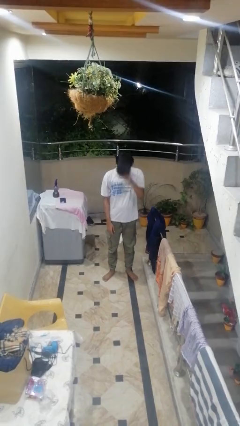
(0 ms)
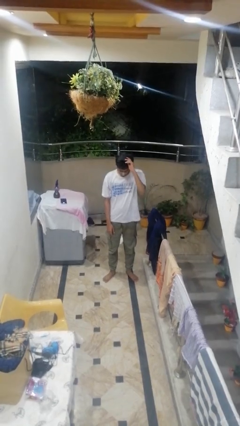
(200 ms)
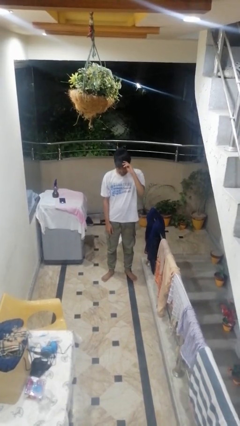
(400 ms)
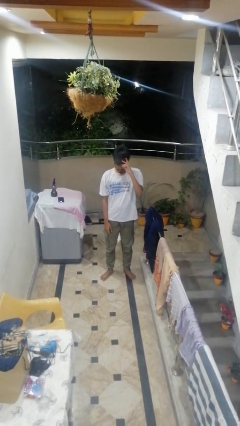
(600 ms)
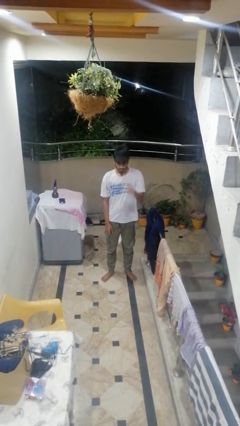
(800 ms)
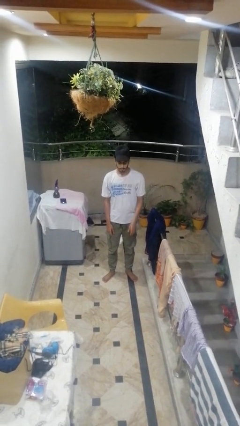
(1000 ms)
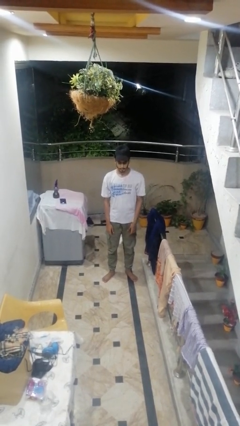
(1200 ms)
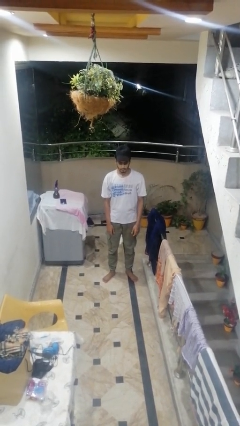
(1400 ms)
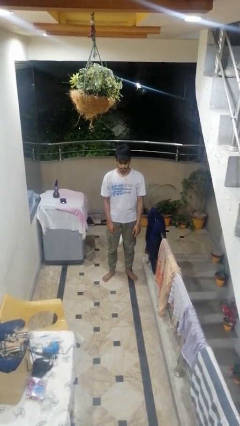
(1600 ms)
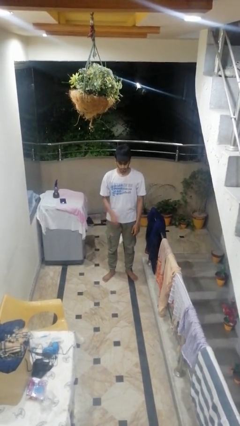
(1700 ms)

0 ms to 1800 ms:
person puts on hat

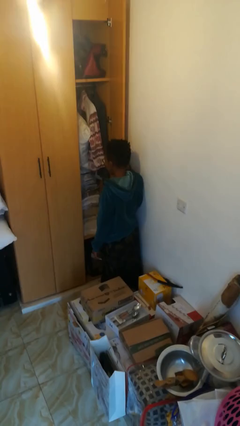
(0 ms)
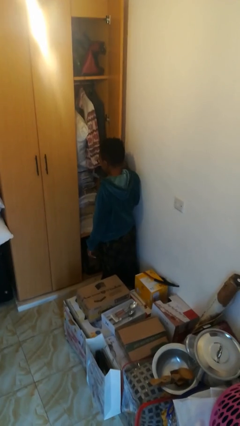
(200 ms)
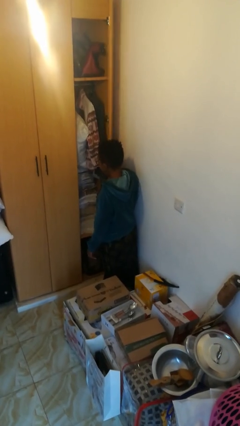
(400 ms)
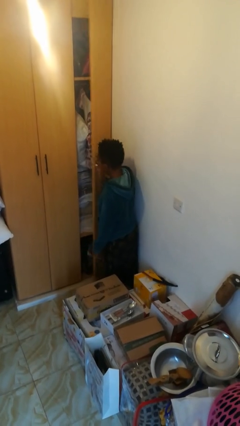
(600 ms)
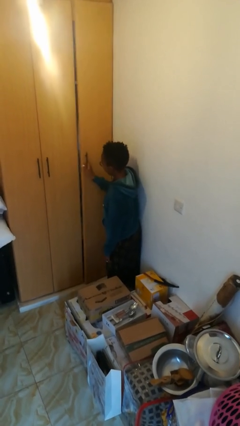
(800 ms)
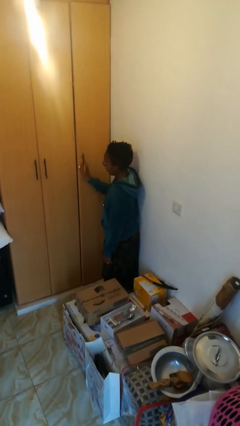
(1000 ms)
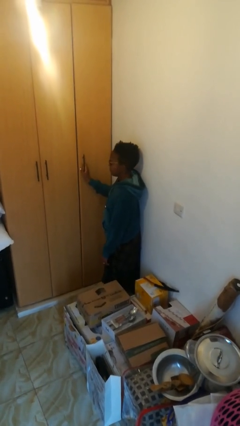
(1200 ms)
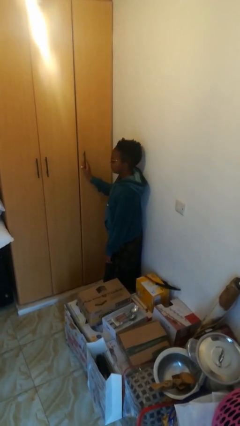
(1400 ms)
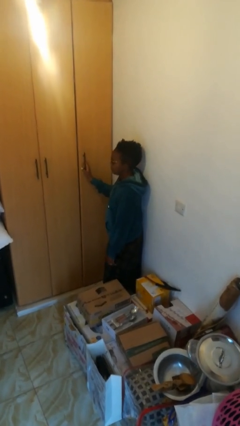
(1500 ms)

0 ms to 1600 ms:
person closes closet door

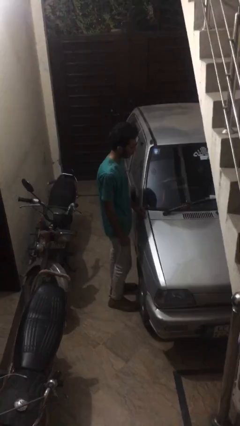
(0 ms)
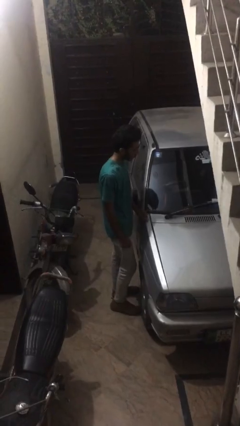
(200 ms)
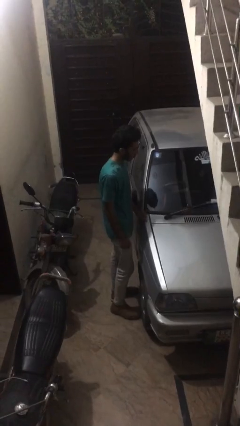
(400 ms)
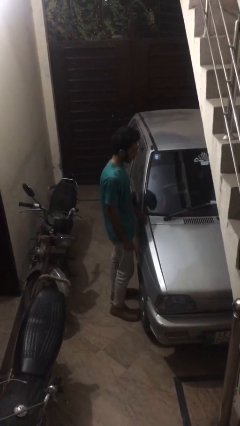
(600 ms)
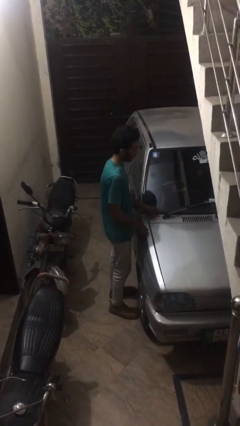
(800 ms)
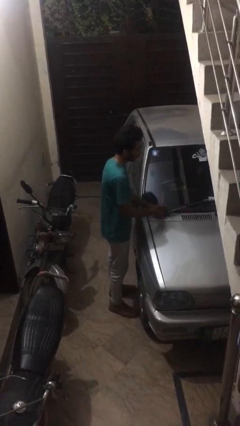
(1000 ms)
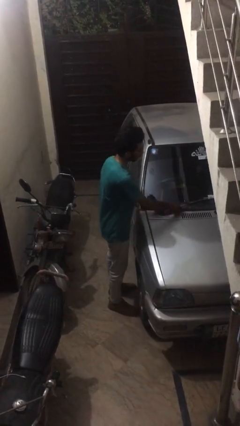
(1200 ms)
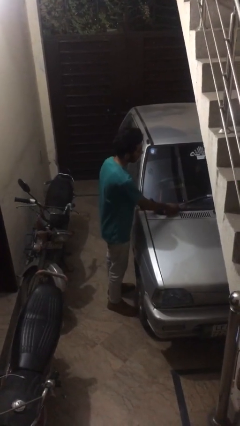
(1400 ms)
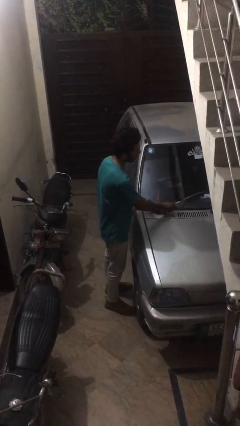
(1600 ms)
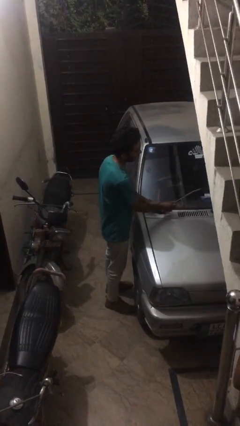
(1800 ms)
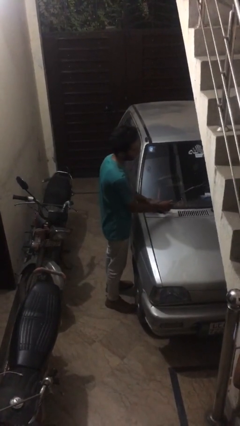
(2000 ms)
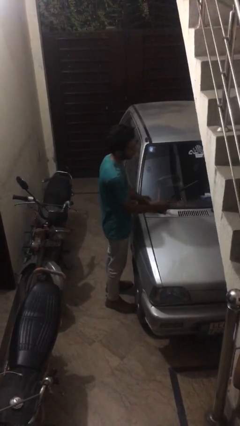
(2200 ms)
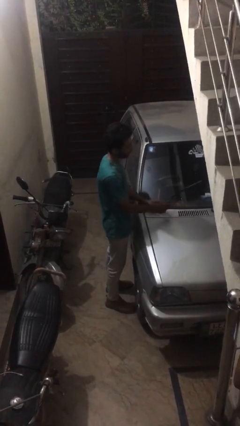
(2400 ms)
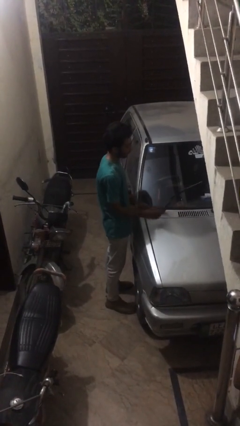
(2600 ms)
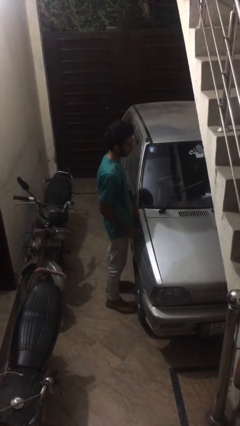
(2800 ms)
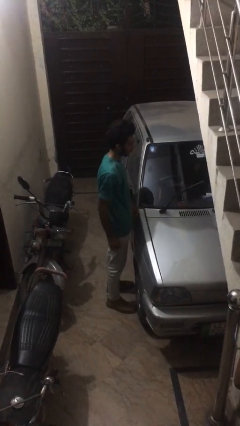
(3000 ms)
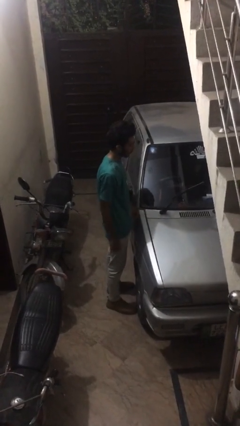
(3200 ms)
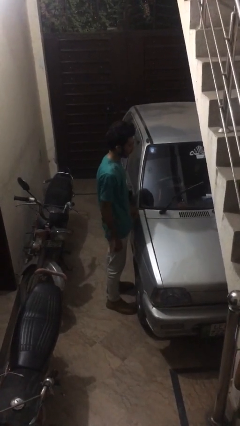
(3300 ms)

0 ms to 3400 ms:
person flips up car wipers

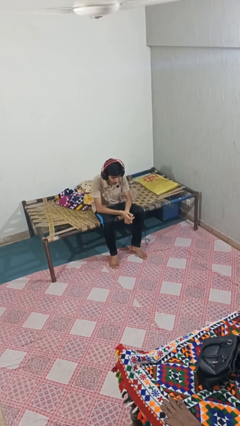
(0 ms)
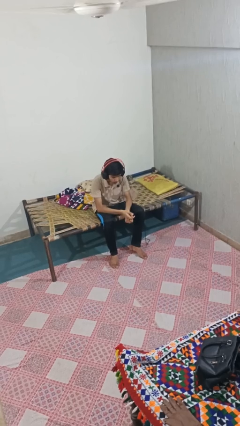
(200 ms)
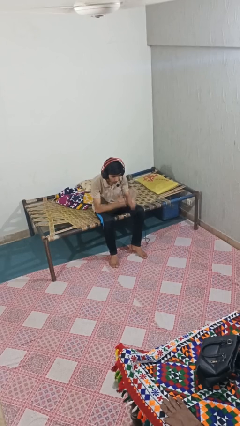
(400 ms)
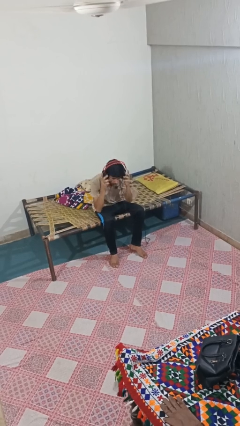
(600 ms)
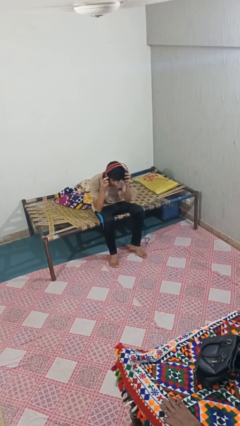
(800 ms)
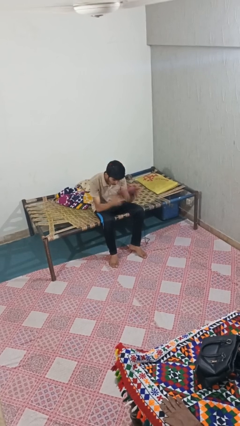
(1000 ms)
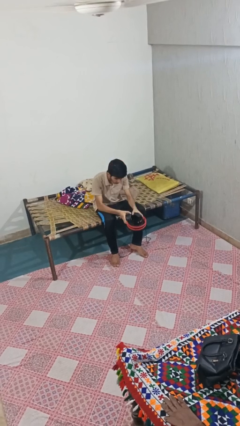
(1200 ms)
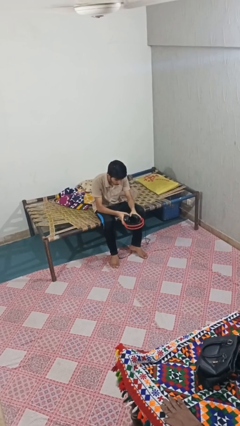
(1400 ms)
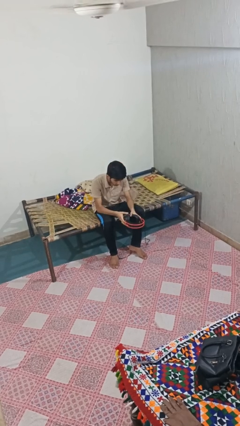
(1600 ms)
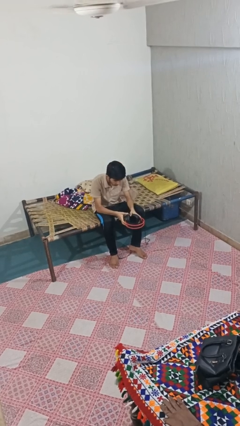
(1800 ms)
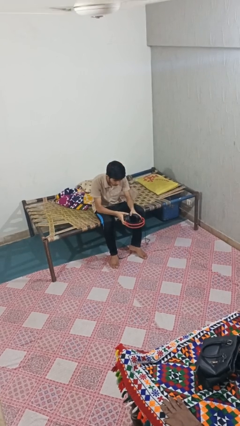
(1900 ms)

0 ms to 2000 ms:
person takes off headphones

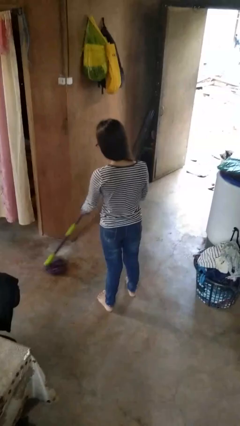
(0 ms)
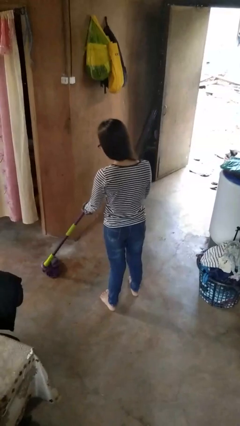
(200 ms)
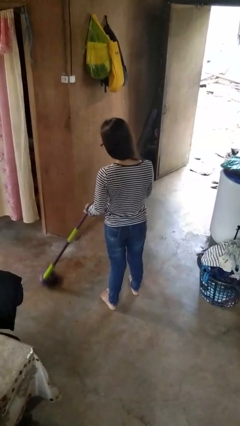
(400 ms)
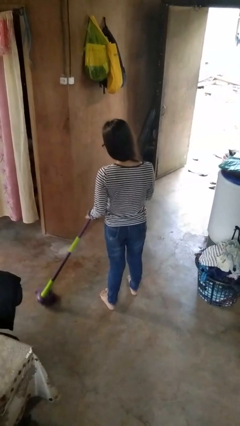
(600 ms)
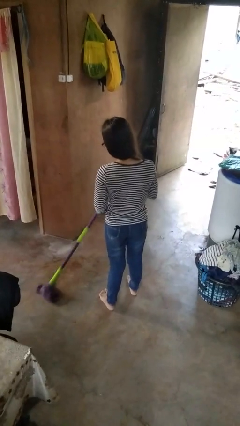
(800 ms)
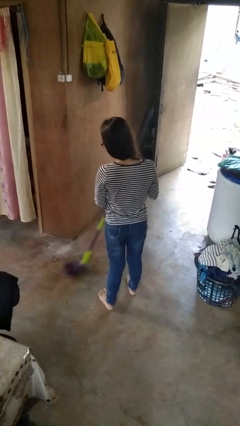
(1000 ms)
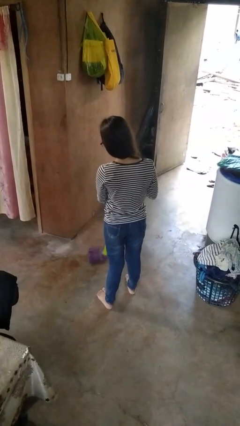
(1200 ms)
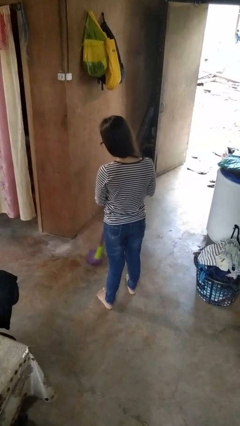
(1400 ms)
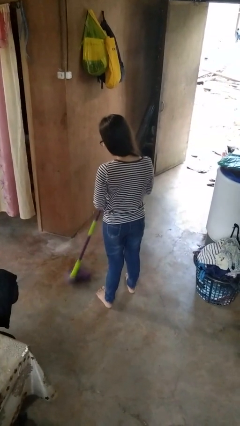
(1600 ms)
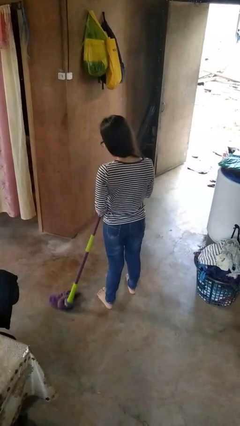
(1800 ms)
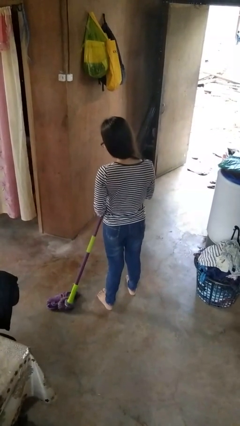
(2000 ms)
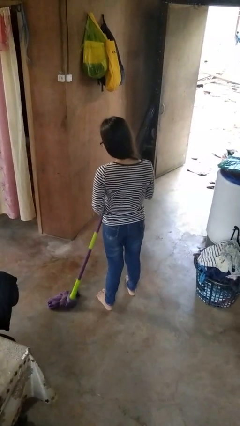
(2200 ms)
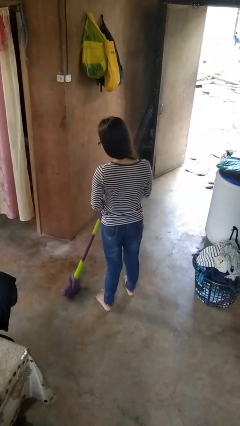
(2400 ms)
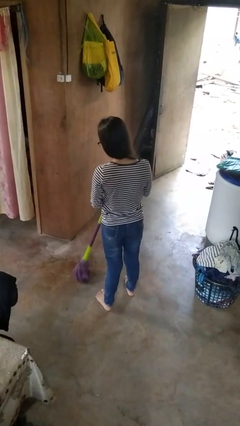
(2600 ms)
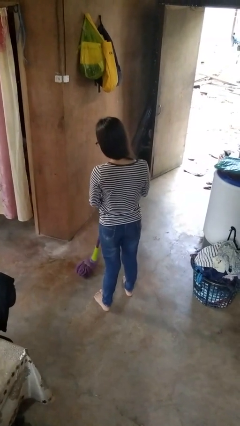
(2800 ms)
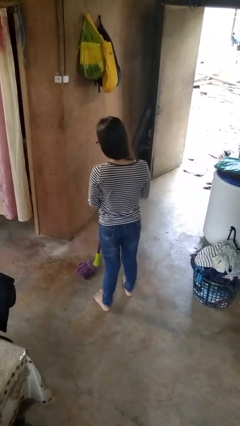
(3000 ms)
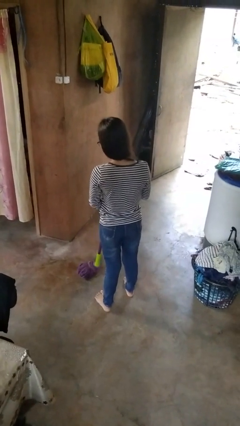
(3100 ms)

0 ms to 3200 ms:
person mops

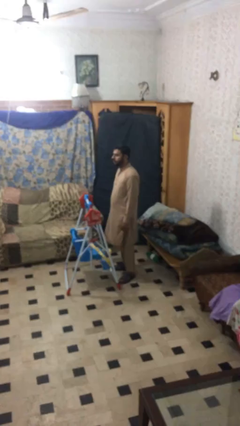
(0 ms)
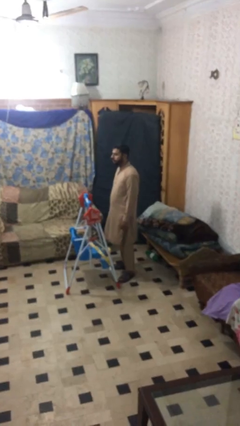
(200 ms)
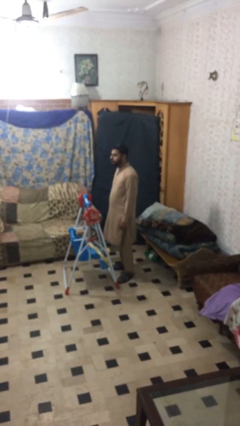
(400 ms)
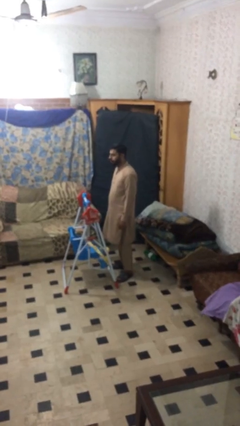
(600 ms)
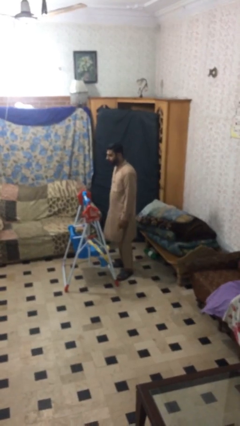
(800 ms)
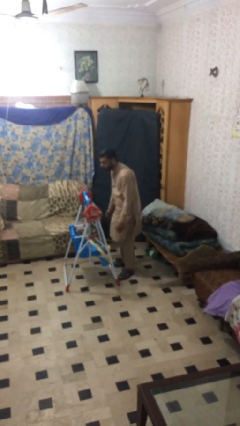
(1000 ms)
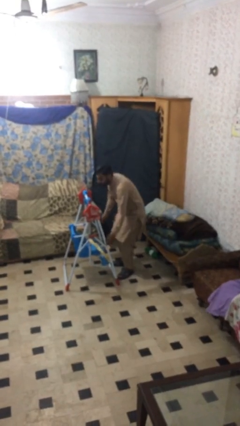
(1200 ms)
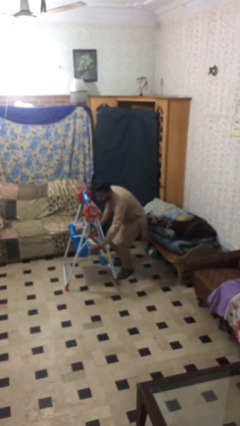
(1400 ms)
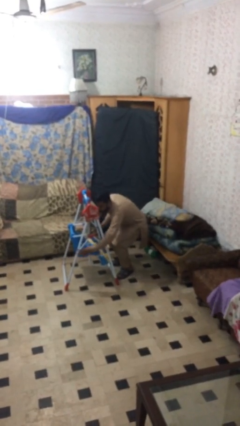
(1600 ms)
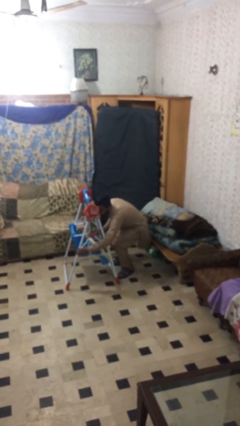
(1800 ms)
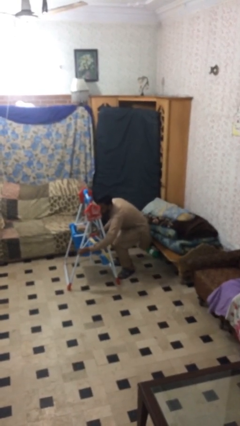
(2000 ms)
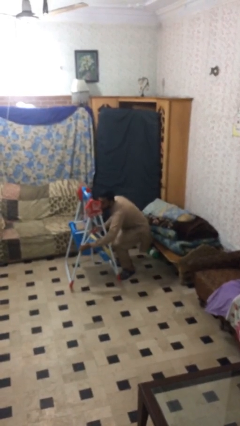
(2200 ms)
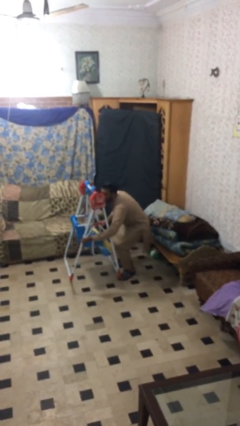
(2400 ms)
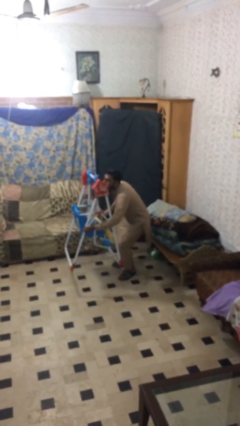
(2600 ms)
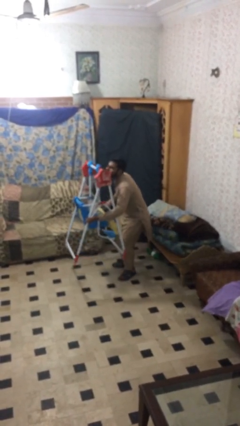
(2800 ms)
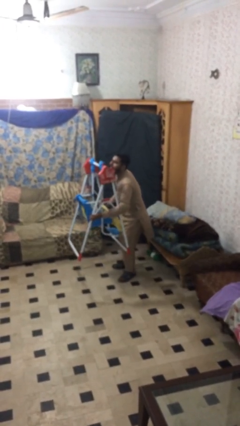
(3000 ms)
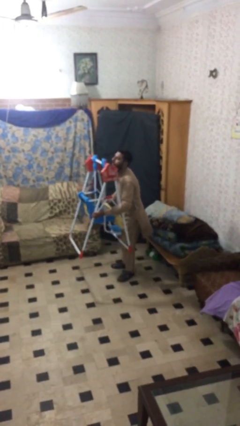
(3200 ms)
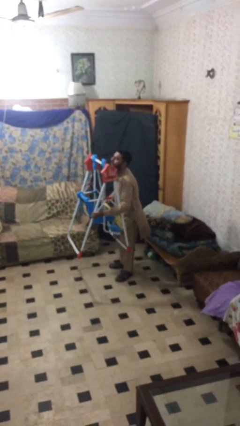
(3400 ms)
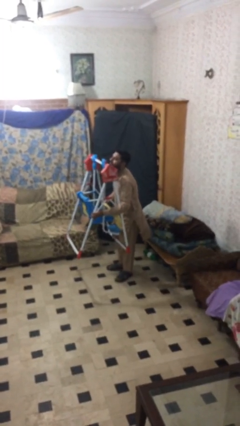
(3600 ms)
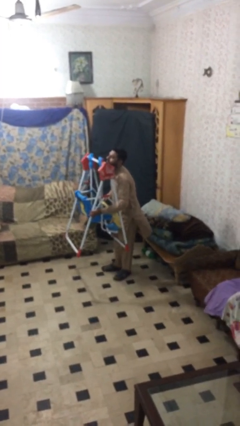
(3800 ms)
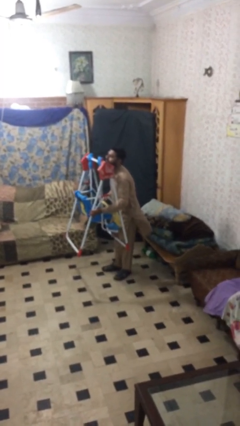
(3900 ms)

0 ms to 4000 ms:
person picks up object from floor

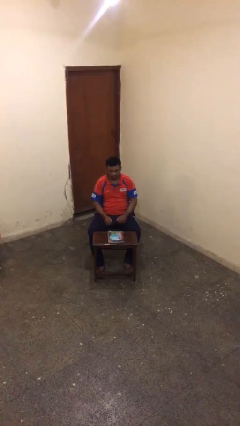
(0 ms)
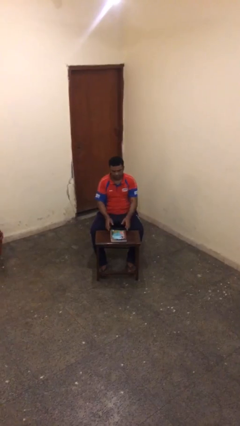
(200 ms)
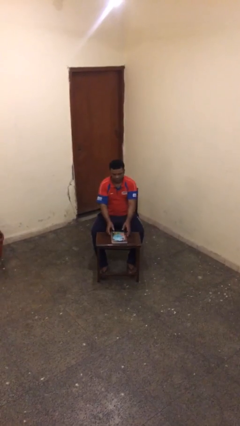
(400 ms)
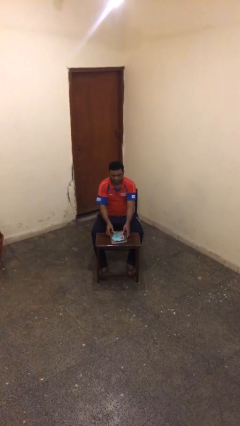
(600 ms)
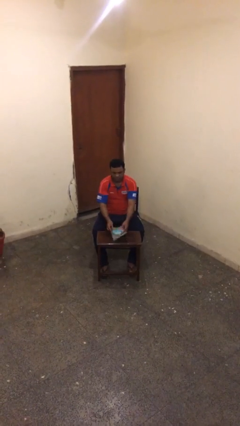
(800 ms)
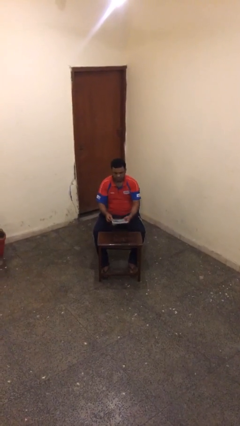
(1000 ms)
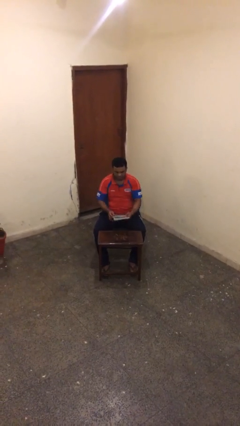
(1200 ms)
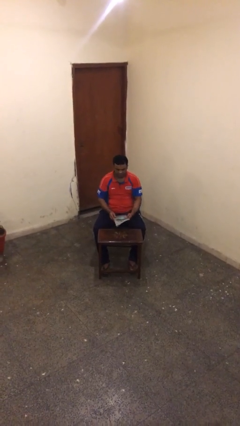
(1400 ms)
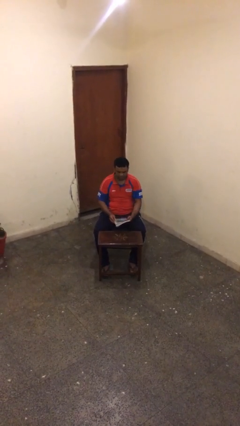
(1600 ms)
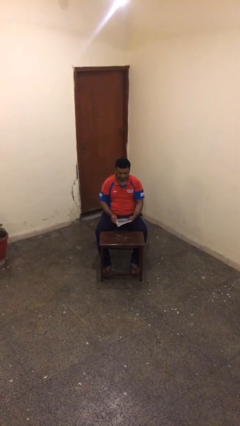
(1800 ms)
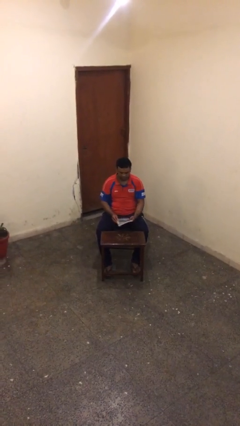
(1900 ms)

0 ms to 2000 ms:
person picks up object from table
